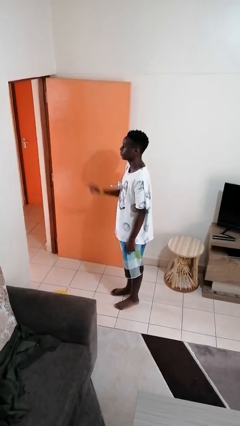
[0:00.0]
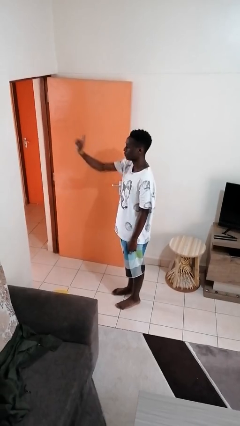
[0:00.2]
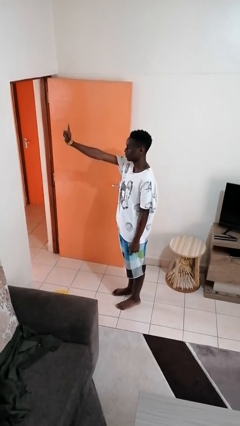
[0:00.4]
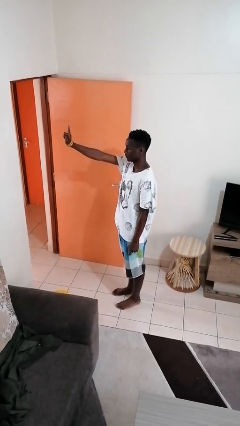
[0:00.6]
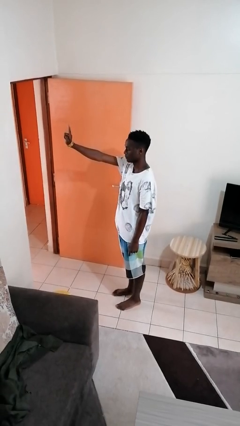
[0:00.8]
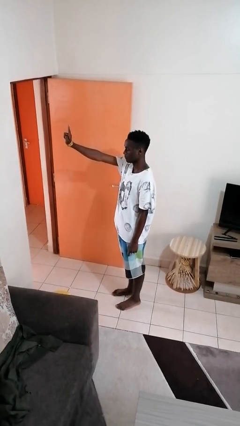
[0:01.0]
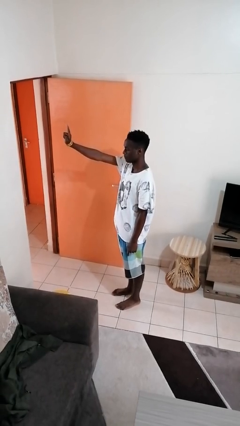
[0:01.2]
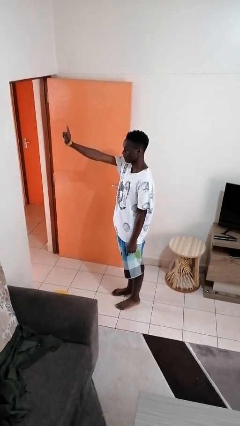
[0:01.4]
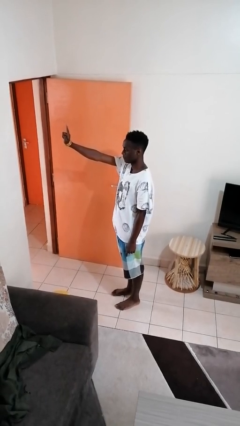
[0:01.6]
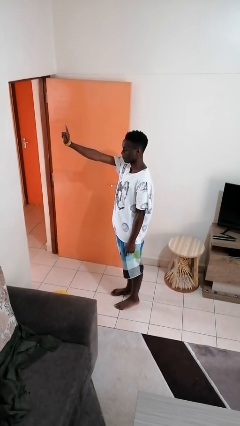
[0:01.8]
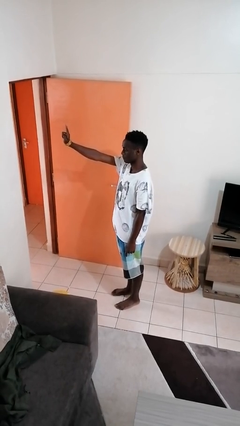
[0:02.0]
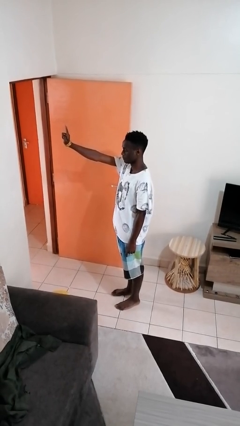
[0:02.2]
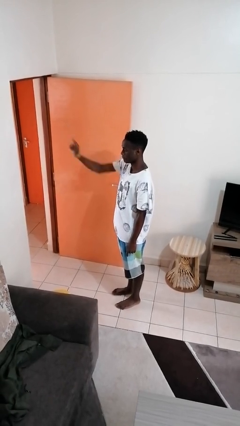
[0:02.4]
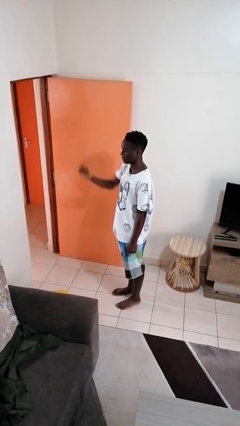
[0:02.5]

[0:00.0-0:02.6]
person gestures number one

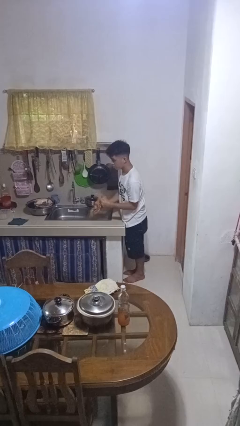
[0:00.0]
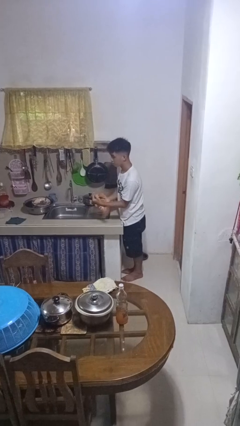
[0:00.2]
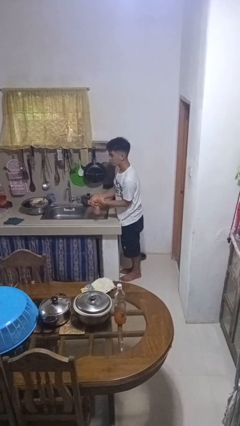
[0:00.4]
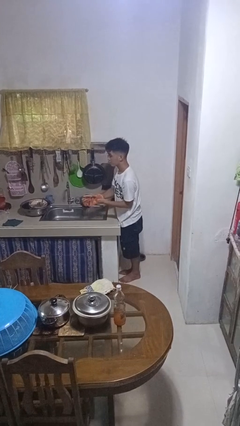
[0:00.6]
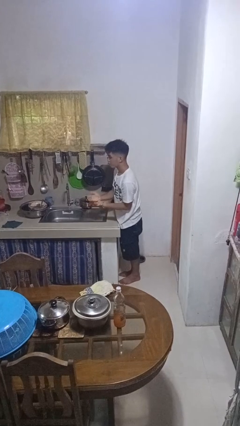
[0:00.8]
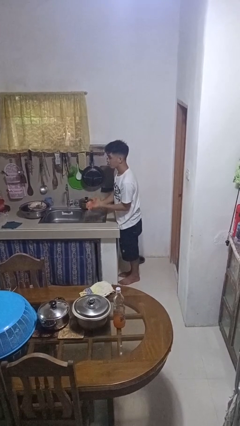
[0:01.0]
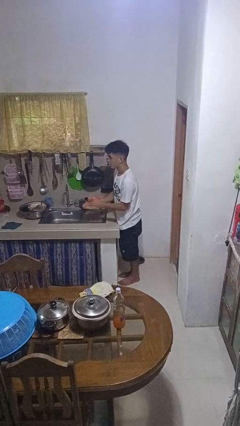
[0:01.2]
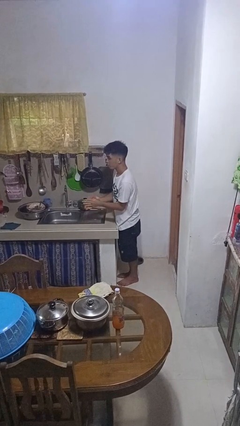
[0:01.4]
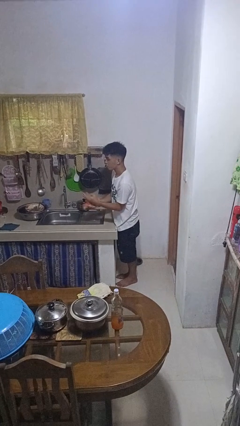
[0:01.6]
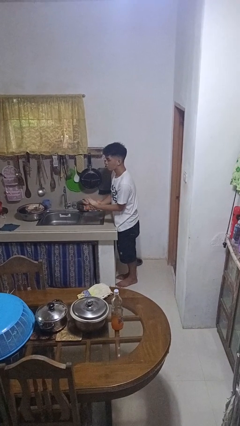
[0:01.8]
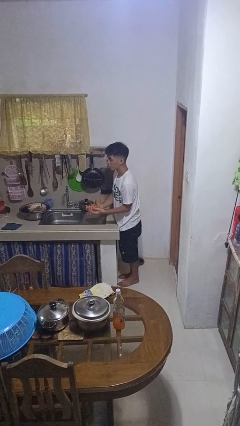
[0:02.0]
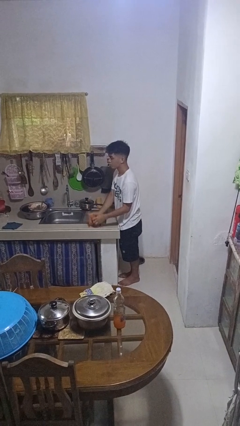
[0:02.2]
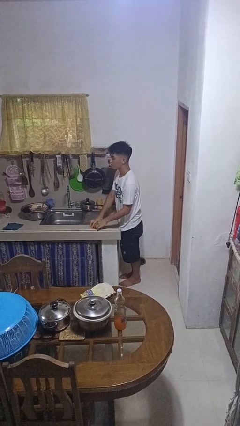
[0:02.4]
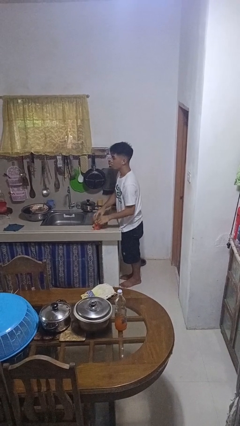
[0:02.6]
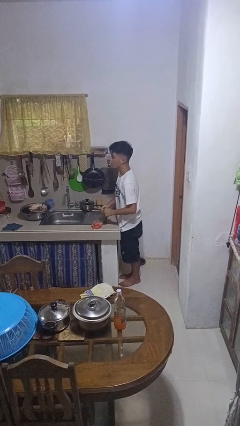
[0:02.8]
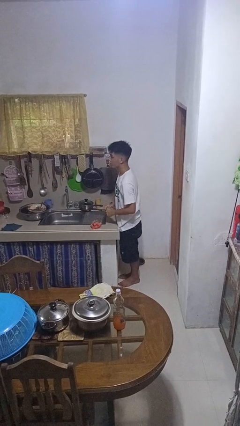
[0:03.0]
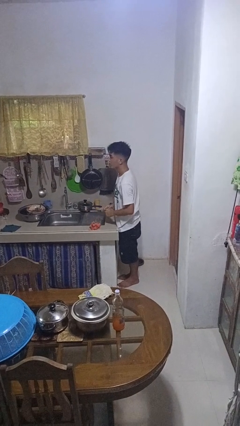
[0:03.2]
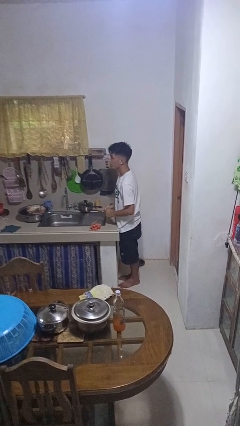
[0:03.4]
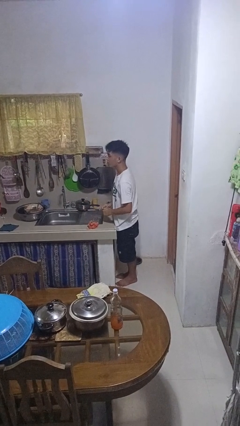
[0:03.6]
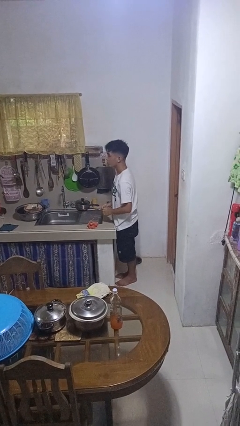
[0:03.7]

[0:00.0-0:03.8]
person dries hands with towel

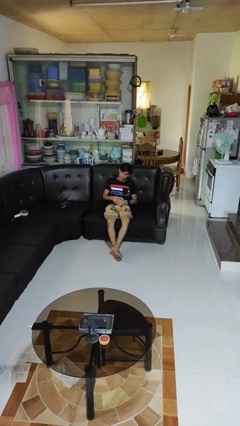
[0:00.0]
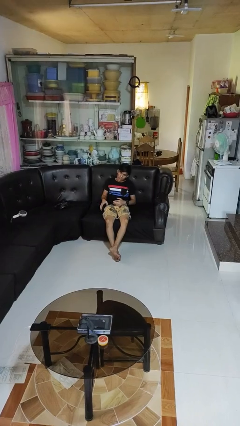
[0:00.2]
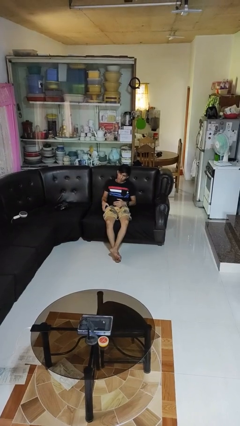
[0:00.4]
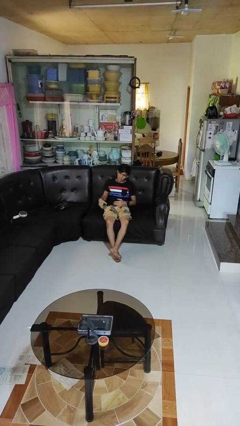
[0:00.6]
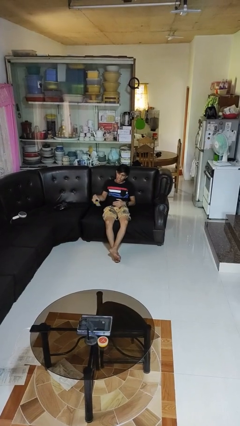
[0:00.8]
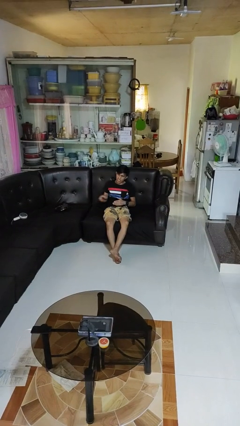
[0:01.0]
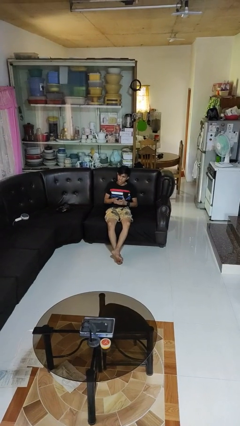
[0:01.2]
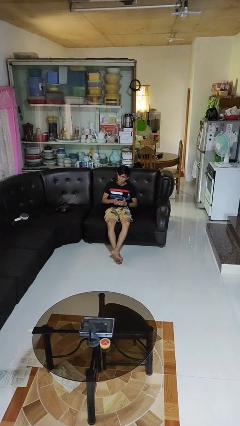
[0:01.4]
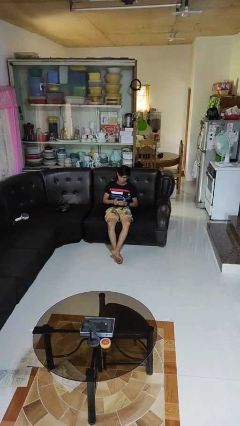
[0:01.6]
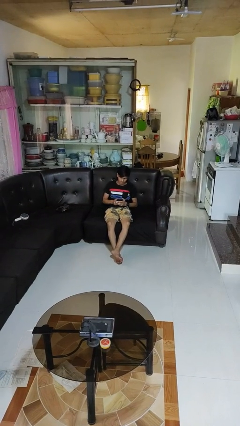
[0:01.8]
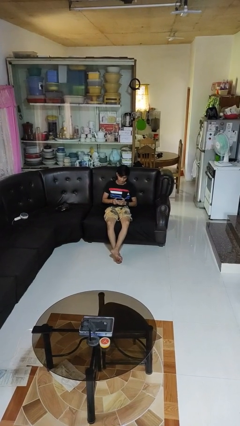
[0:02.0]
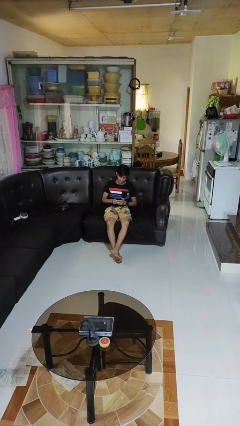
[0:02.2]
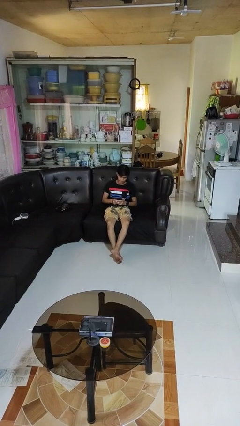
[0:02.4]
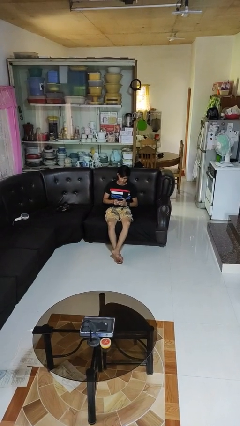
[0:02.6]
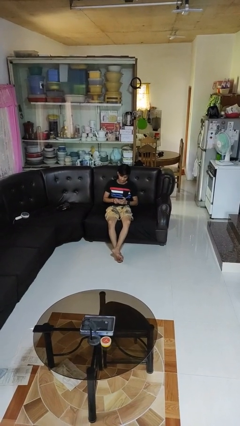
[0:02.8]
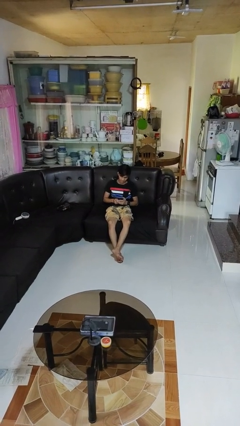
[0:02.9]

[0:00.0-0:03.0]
person takes phone from pocket

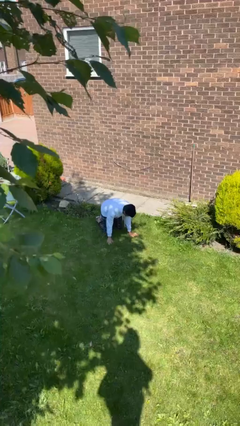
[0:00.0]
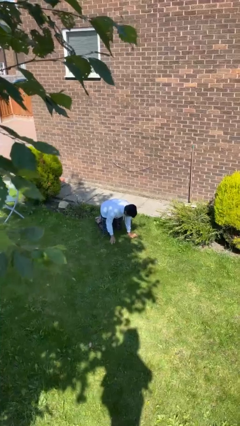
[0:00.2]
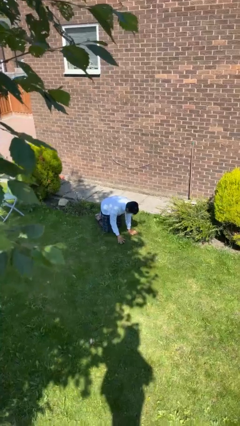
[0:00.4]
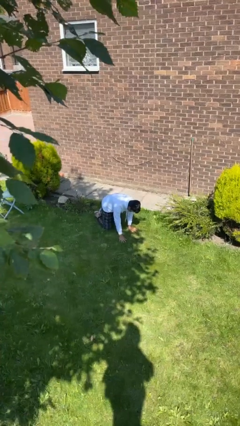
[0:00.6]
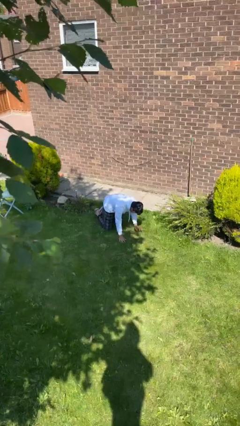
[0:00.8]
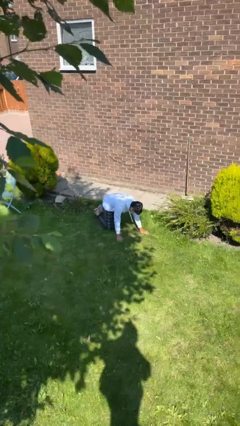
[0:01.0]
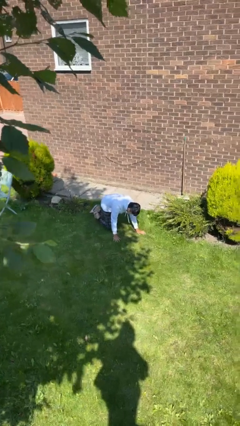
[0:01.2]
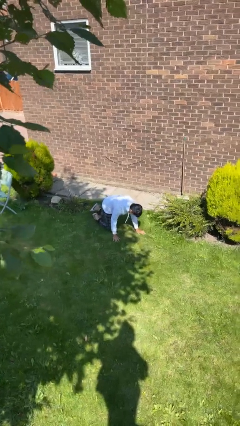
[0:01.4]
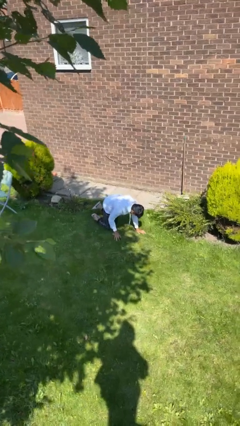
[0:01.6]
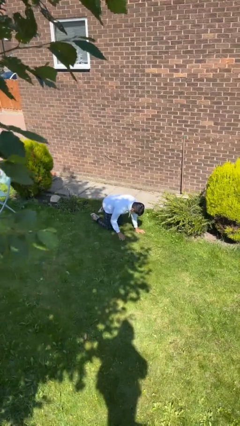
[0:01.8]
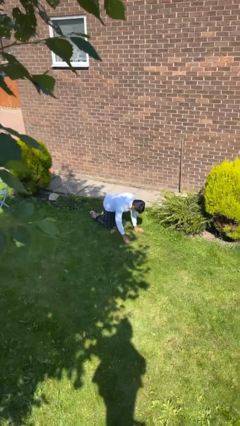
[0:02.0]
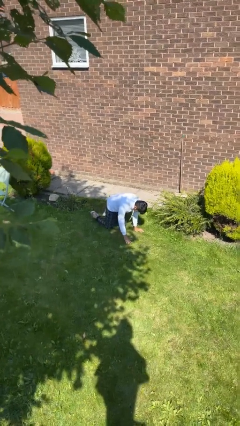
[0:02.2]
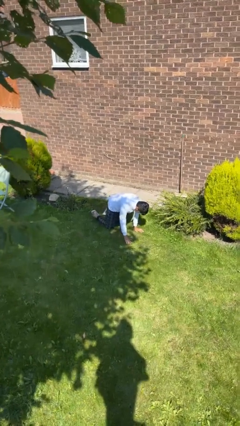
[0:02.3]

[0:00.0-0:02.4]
person crawls

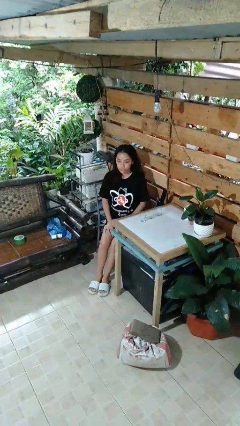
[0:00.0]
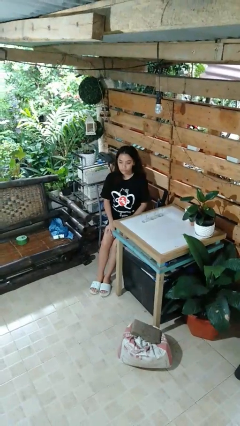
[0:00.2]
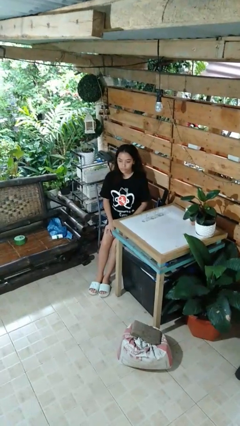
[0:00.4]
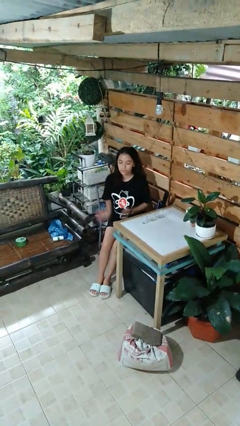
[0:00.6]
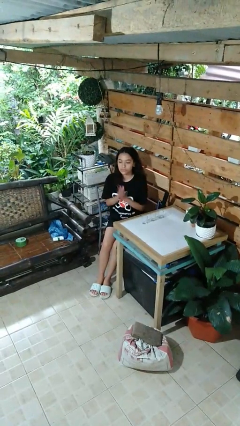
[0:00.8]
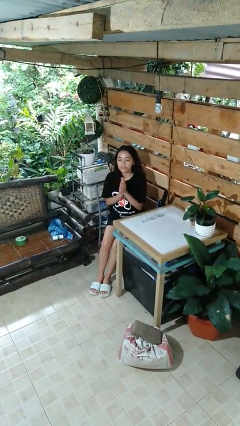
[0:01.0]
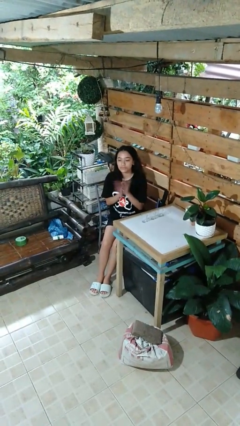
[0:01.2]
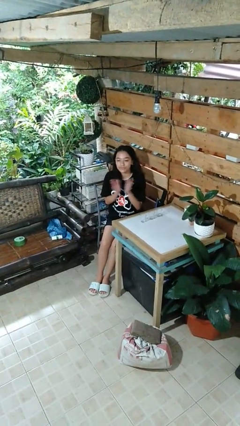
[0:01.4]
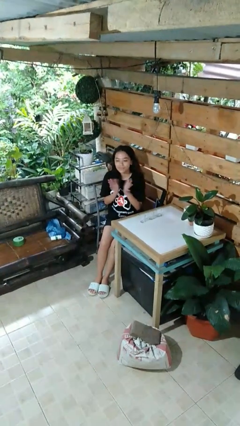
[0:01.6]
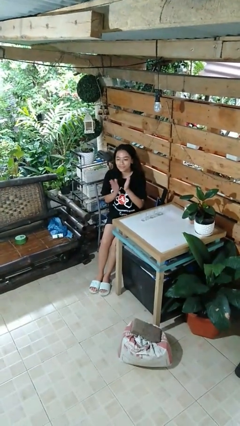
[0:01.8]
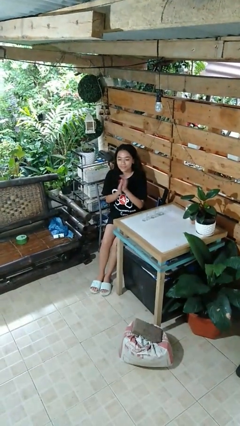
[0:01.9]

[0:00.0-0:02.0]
person claps hands

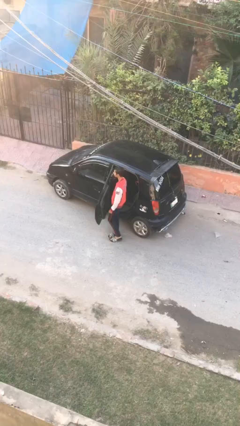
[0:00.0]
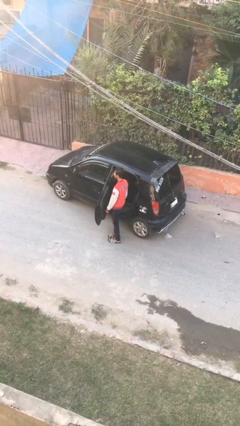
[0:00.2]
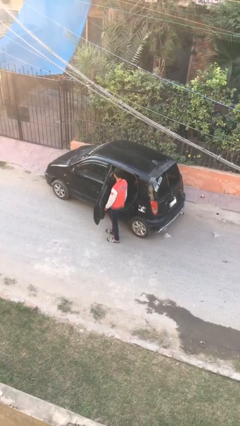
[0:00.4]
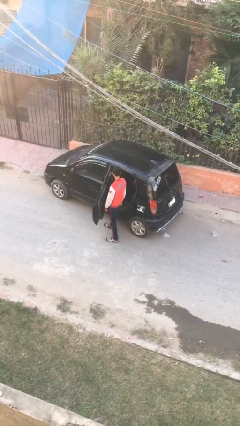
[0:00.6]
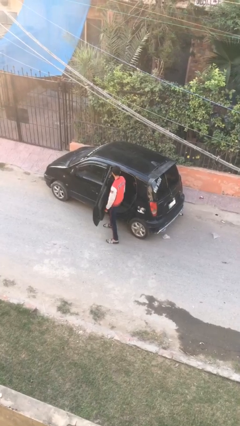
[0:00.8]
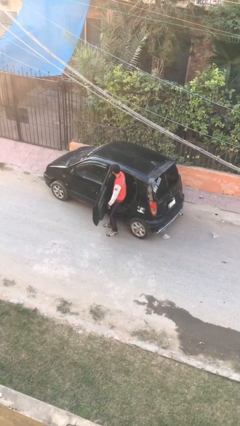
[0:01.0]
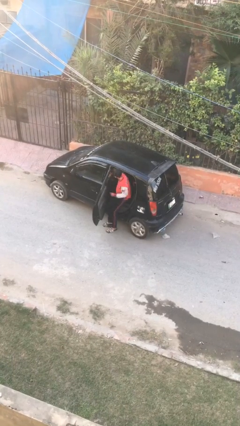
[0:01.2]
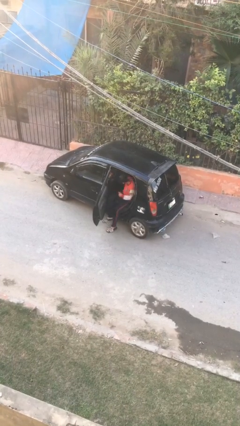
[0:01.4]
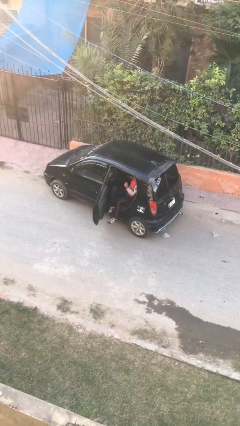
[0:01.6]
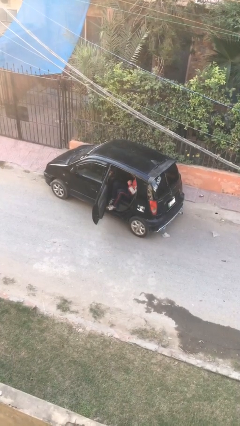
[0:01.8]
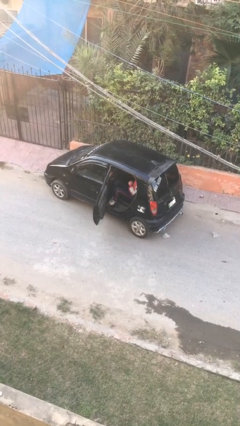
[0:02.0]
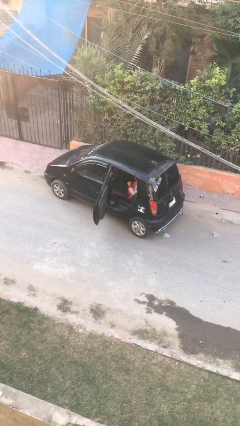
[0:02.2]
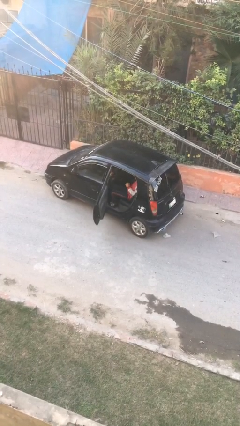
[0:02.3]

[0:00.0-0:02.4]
person enters car

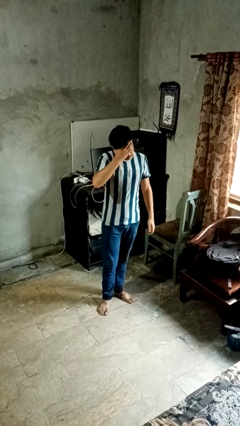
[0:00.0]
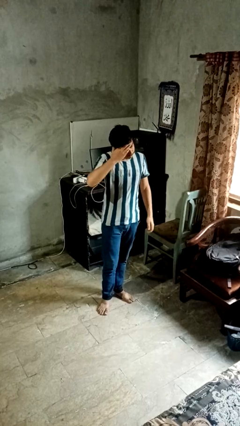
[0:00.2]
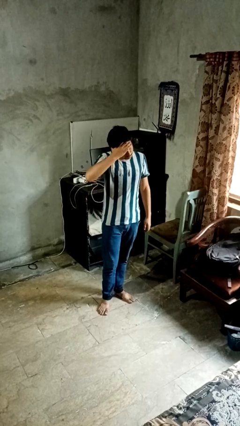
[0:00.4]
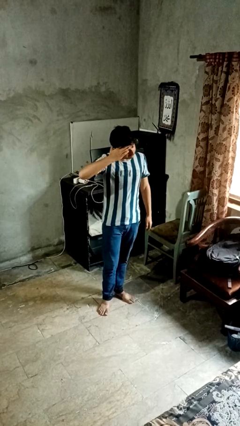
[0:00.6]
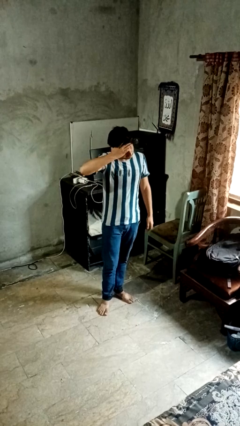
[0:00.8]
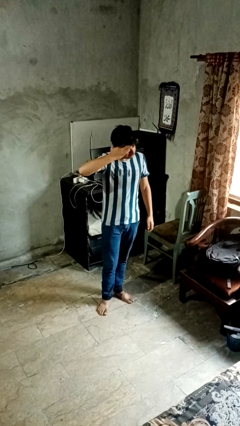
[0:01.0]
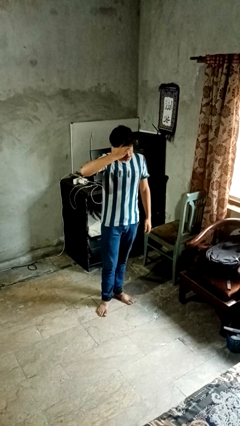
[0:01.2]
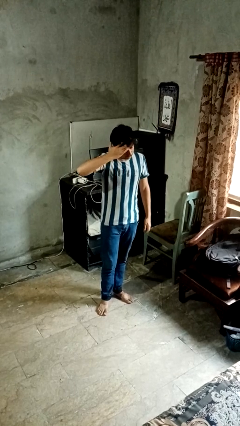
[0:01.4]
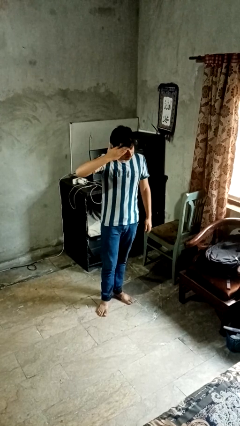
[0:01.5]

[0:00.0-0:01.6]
person scratches face
